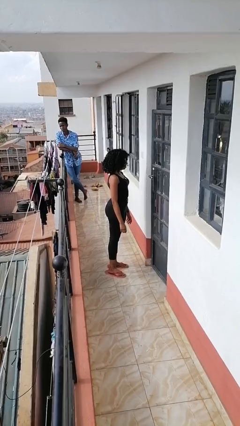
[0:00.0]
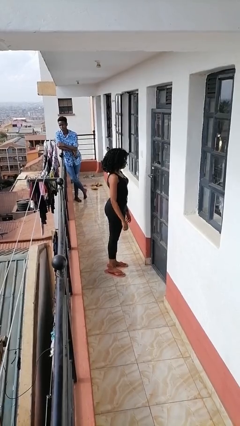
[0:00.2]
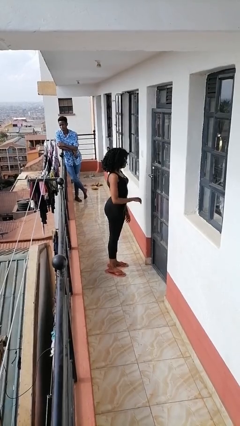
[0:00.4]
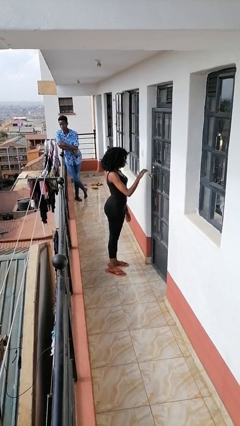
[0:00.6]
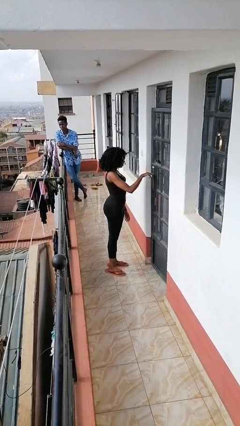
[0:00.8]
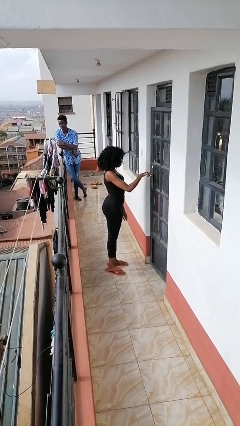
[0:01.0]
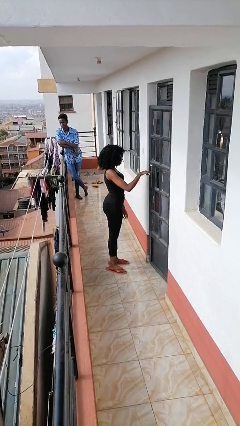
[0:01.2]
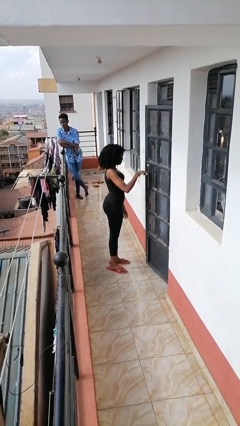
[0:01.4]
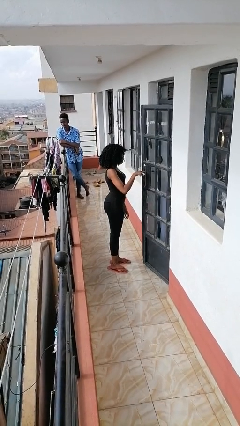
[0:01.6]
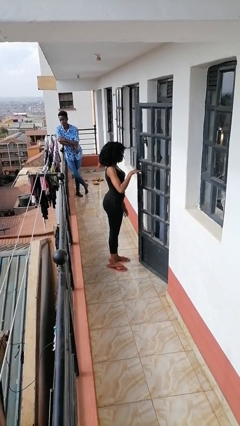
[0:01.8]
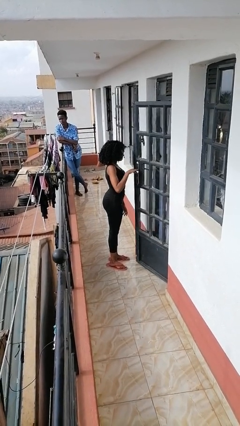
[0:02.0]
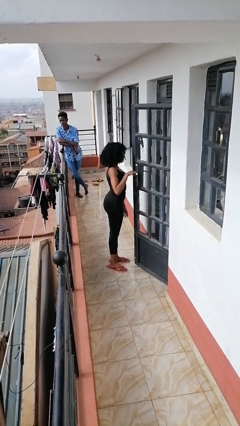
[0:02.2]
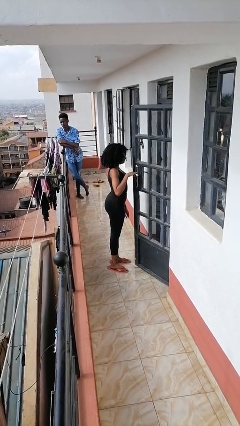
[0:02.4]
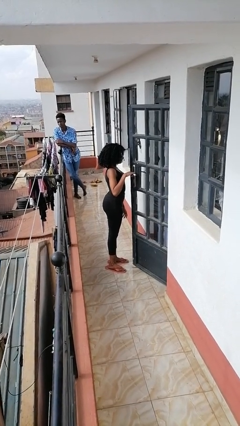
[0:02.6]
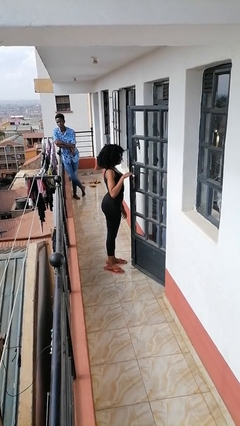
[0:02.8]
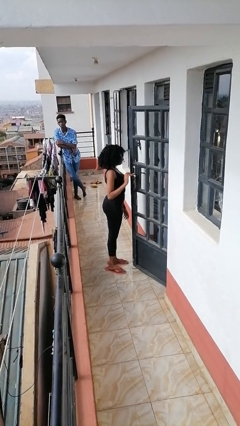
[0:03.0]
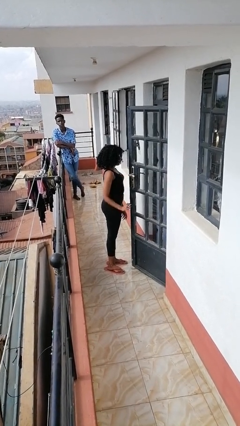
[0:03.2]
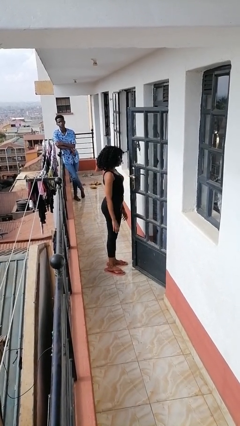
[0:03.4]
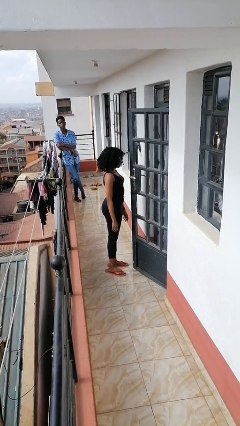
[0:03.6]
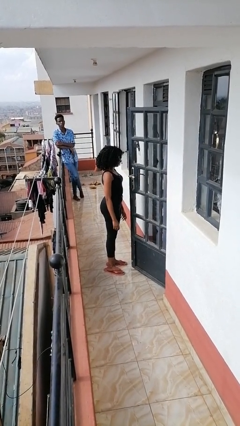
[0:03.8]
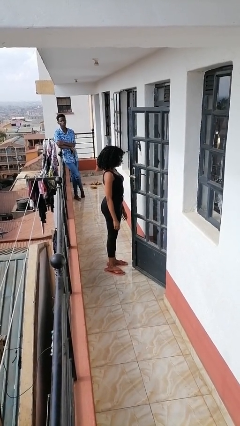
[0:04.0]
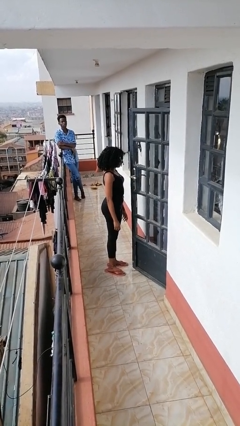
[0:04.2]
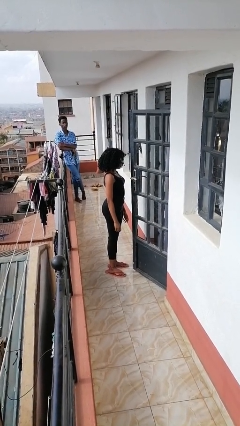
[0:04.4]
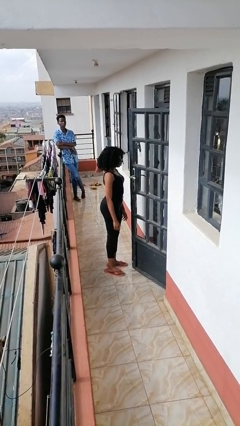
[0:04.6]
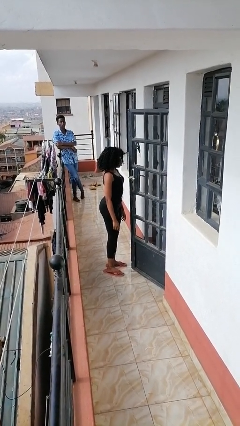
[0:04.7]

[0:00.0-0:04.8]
person opens facility door

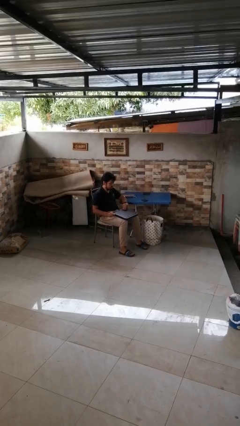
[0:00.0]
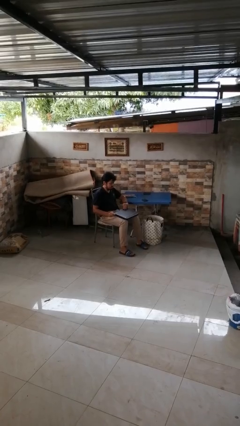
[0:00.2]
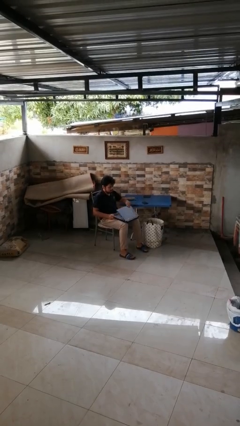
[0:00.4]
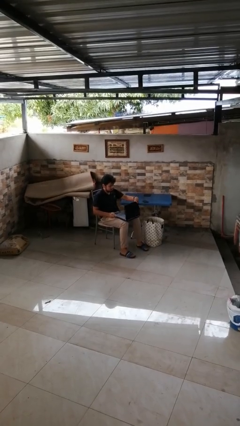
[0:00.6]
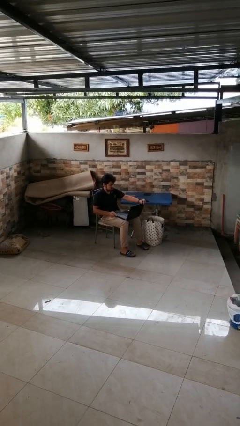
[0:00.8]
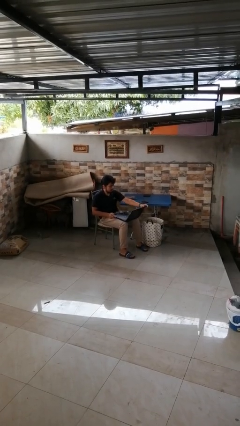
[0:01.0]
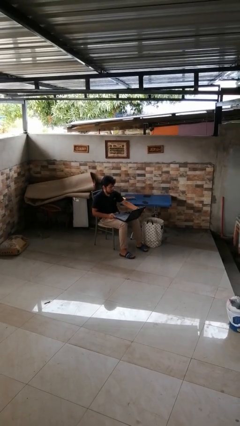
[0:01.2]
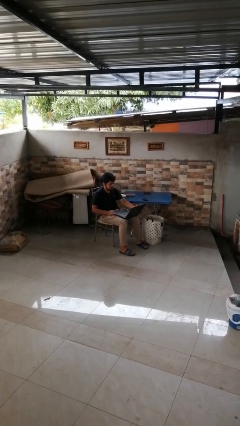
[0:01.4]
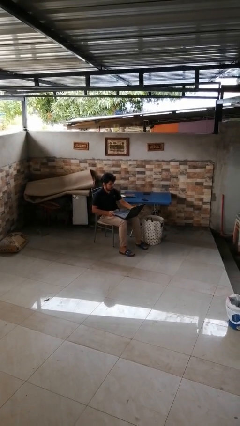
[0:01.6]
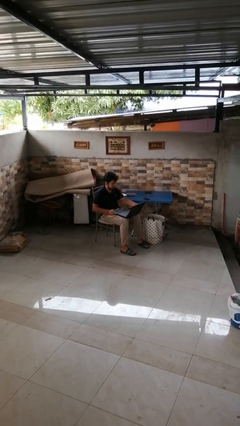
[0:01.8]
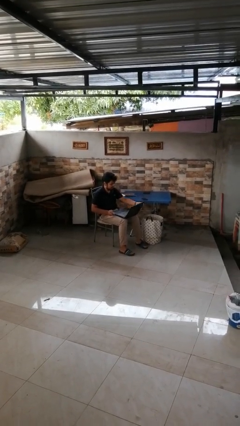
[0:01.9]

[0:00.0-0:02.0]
person opens laptop

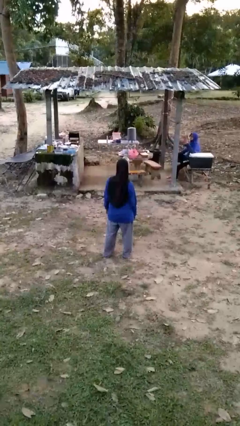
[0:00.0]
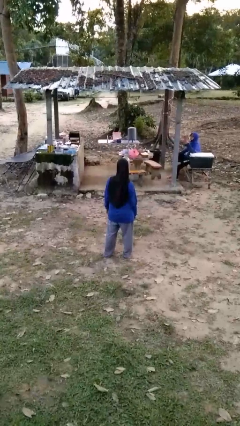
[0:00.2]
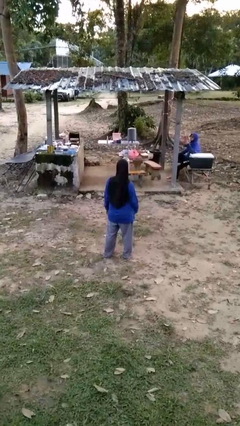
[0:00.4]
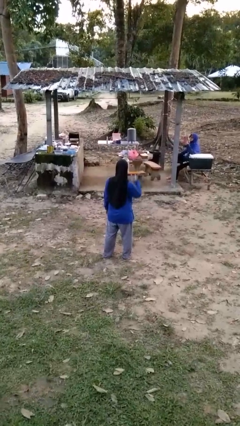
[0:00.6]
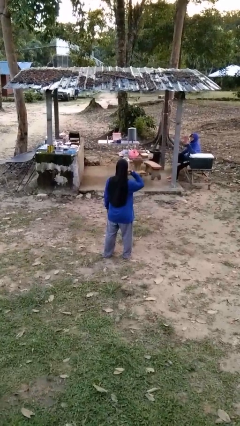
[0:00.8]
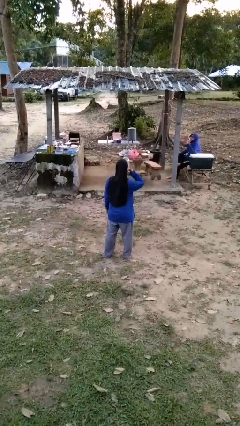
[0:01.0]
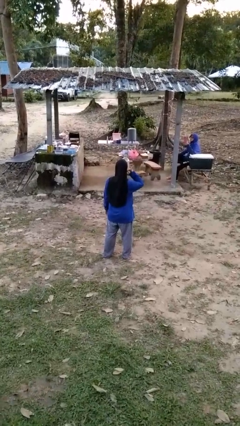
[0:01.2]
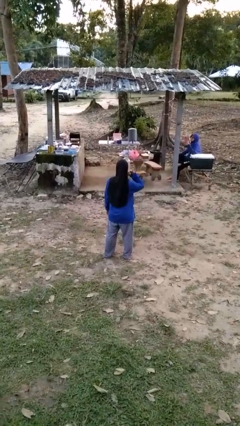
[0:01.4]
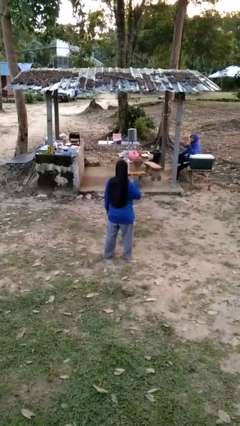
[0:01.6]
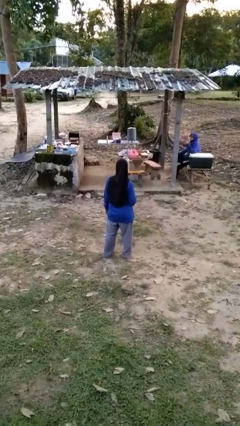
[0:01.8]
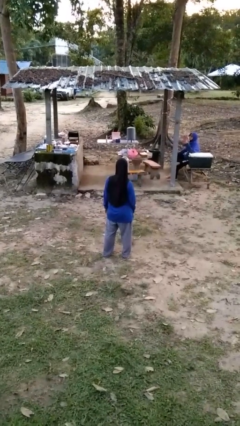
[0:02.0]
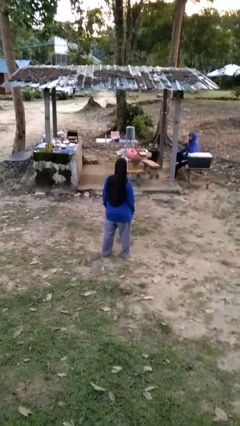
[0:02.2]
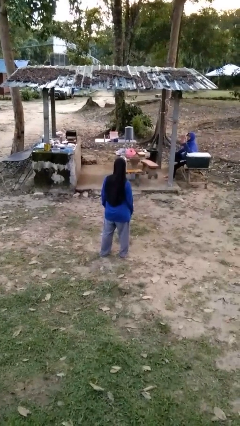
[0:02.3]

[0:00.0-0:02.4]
person gestures call me

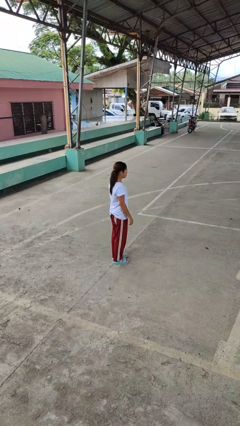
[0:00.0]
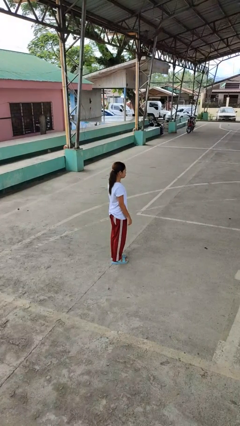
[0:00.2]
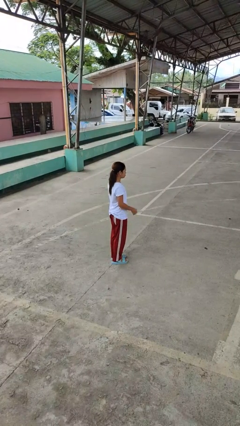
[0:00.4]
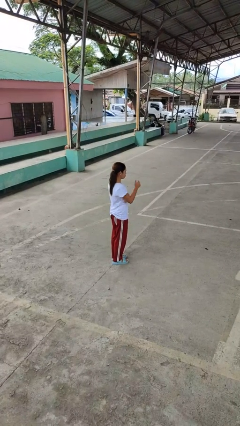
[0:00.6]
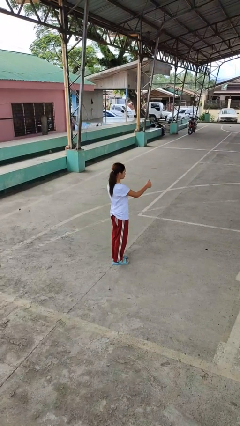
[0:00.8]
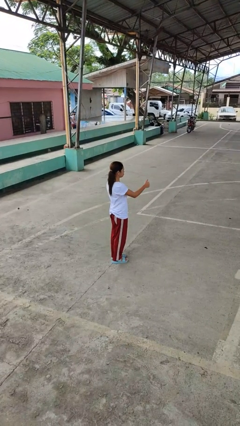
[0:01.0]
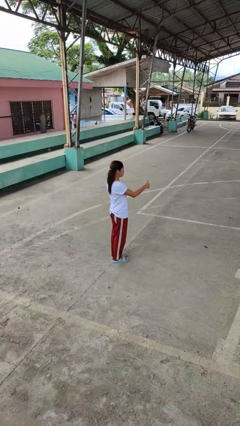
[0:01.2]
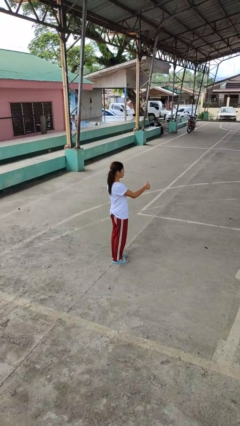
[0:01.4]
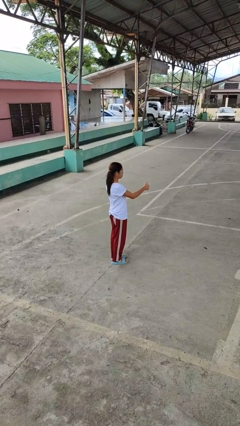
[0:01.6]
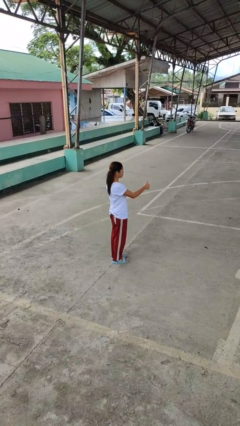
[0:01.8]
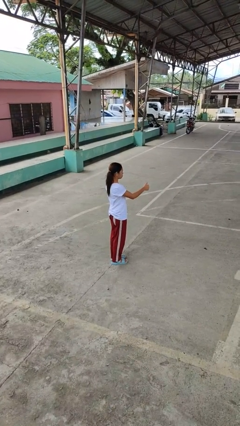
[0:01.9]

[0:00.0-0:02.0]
person gestures thumbs up

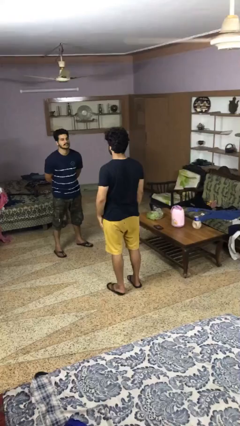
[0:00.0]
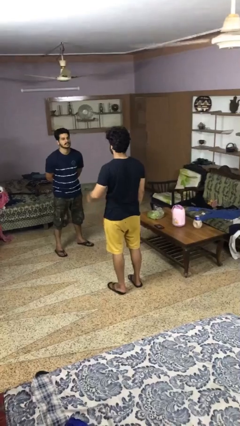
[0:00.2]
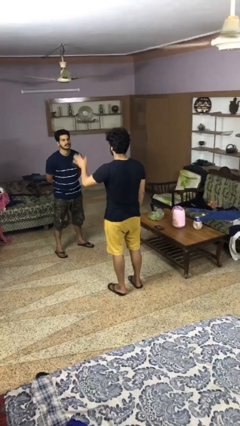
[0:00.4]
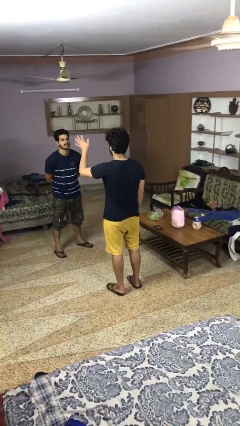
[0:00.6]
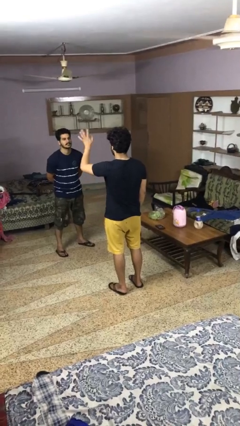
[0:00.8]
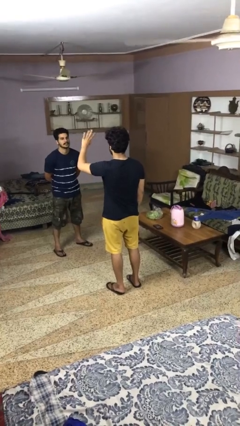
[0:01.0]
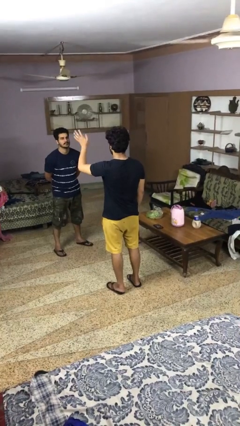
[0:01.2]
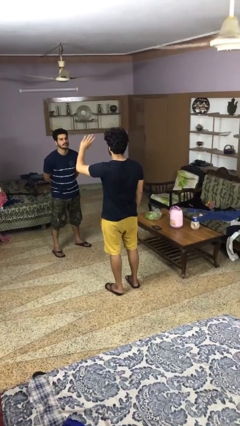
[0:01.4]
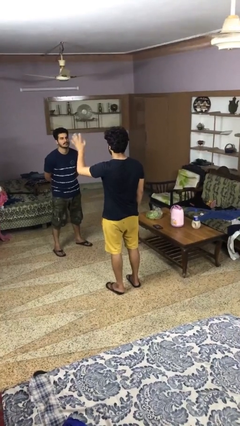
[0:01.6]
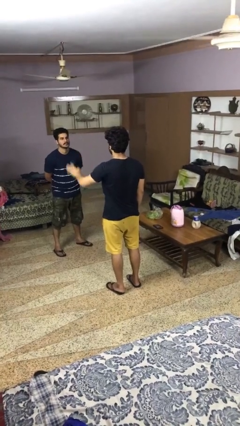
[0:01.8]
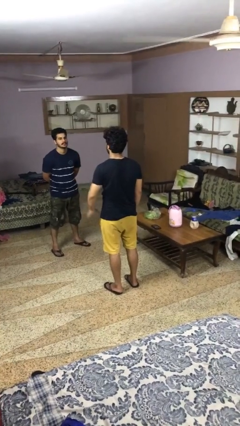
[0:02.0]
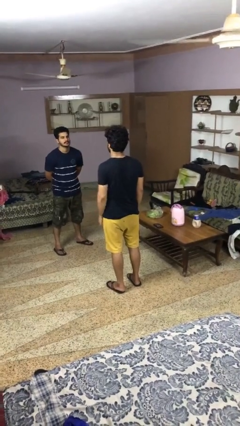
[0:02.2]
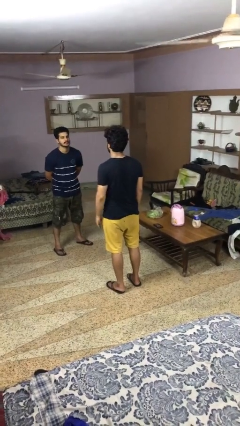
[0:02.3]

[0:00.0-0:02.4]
person waves at person

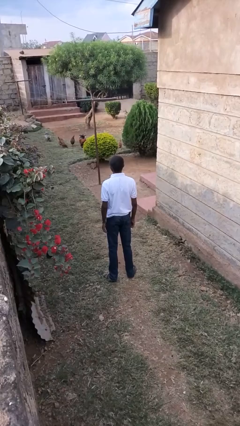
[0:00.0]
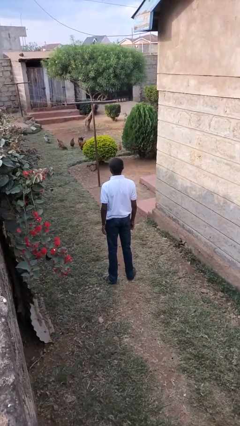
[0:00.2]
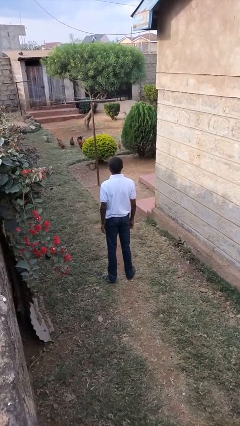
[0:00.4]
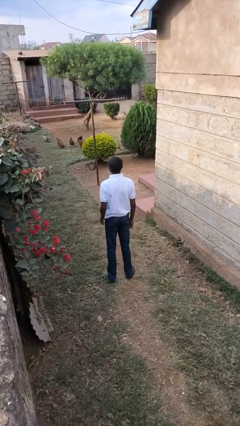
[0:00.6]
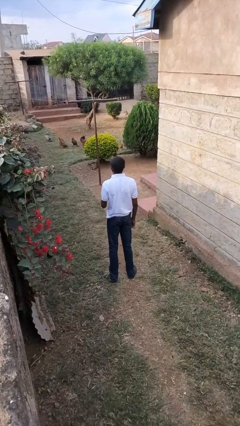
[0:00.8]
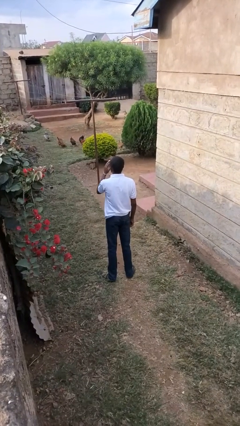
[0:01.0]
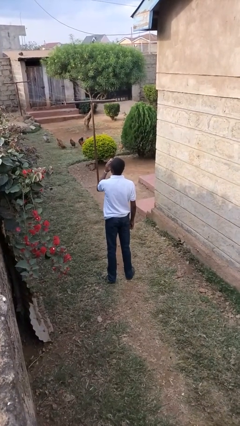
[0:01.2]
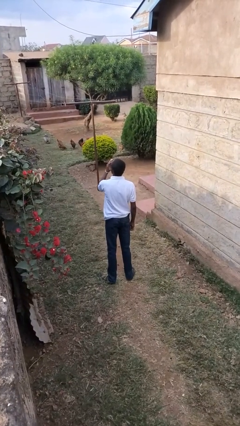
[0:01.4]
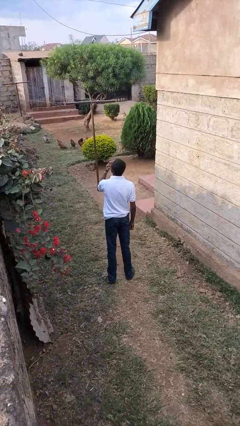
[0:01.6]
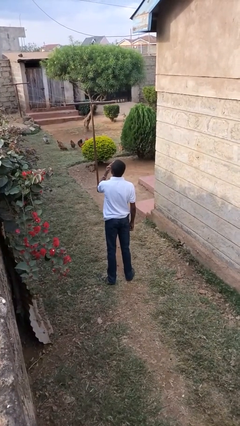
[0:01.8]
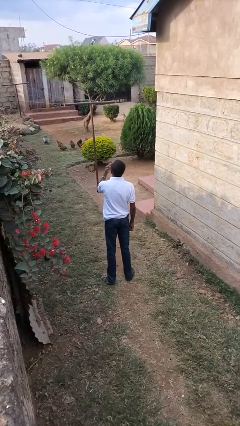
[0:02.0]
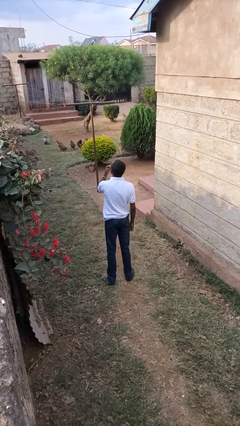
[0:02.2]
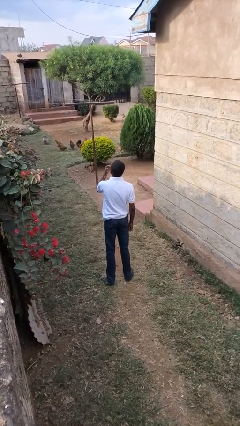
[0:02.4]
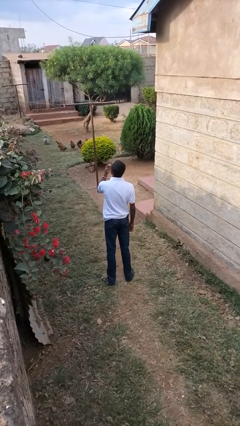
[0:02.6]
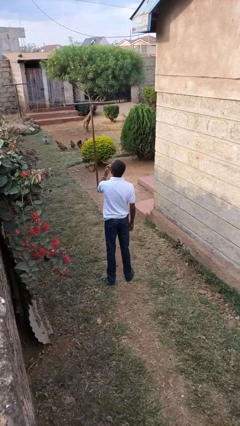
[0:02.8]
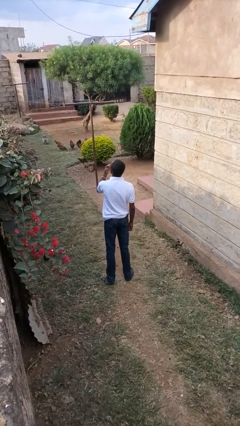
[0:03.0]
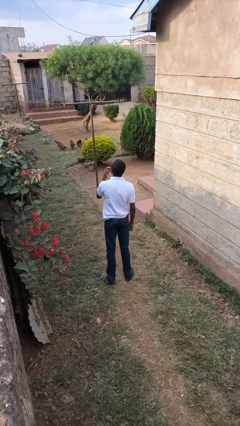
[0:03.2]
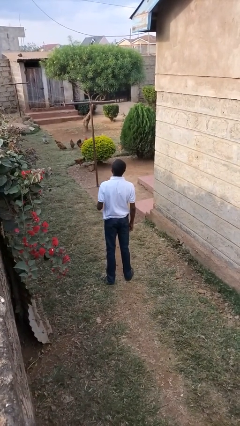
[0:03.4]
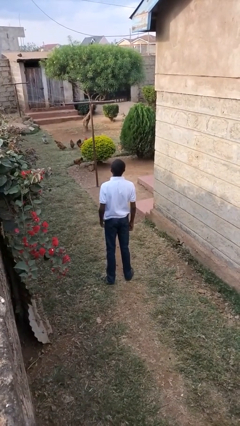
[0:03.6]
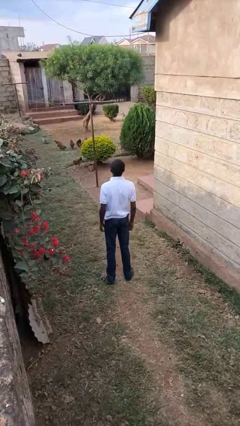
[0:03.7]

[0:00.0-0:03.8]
person licks fingers

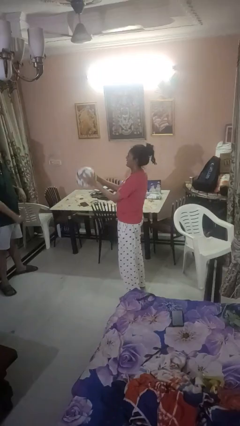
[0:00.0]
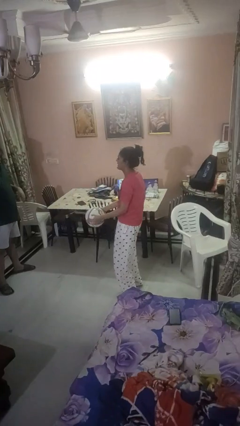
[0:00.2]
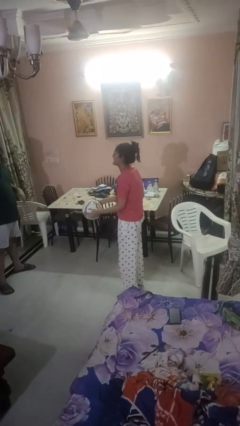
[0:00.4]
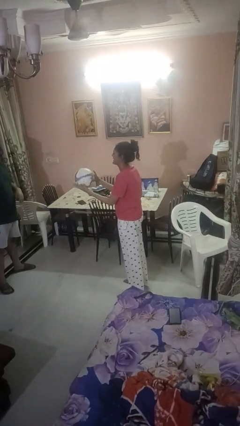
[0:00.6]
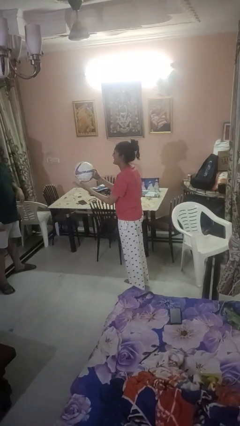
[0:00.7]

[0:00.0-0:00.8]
person catches object from person
